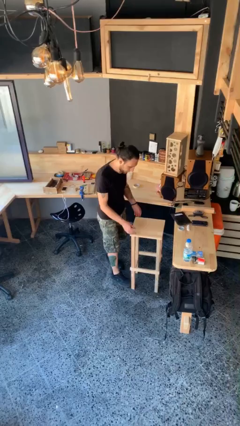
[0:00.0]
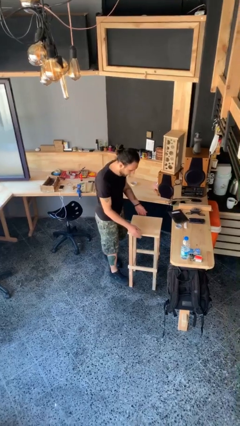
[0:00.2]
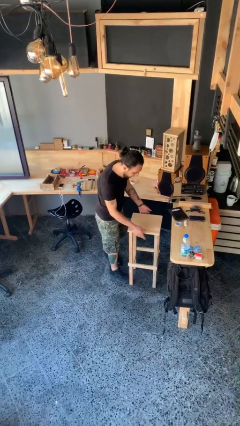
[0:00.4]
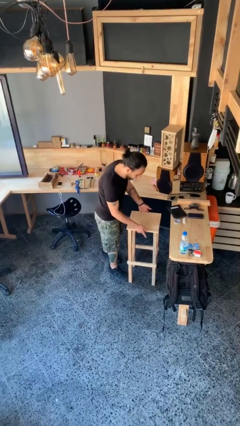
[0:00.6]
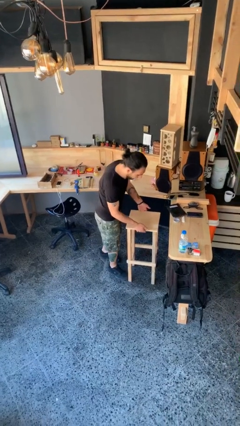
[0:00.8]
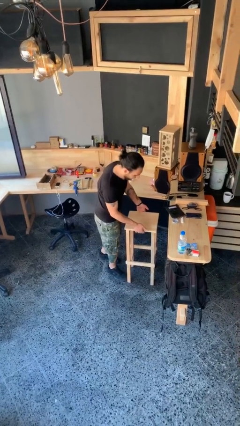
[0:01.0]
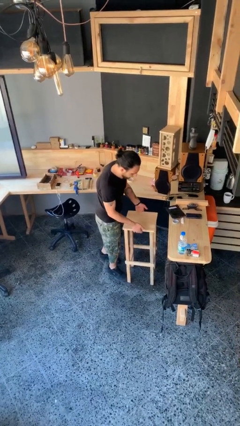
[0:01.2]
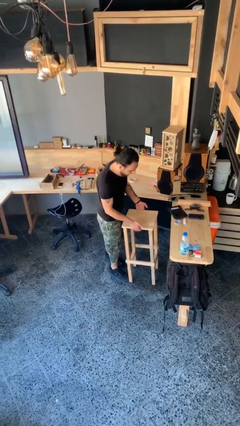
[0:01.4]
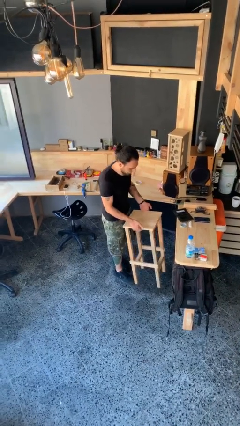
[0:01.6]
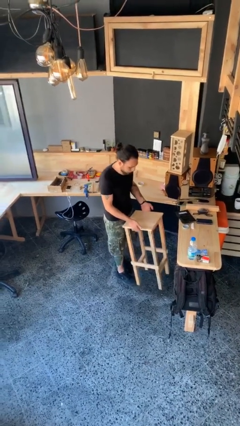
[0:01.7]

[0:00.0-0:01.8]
person picks up object from floor

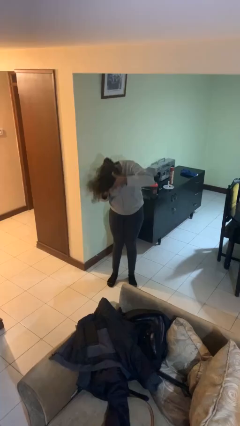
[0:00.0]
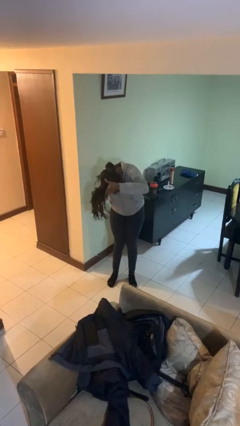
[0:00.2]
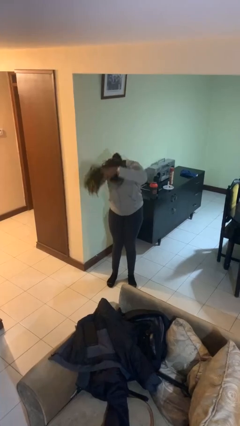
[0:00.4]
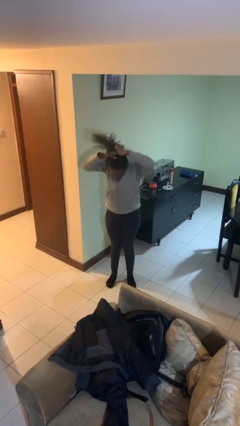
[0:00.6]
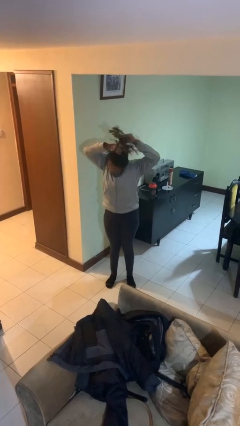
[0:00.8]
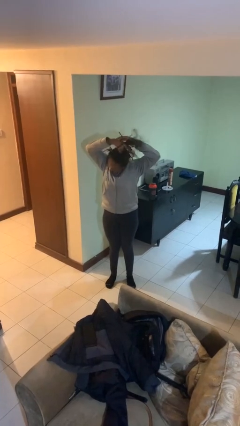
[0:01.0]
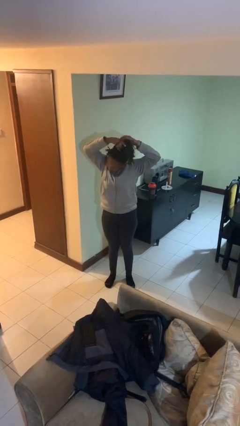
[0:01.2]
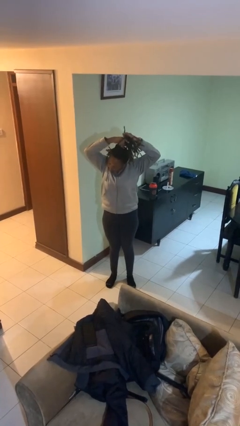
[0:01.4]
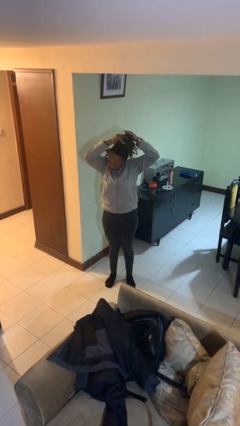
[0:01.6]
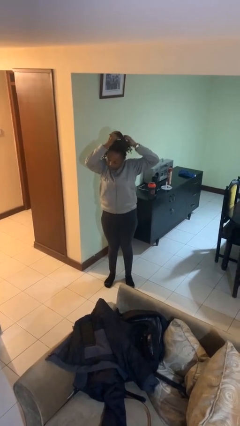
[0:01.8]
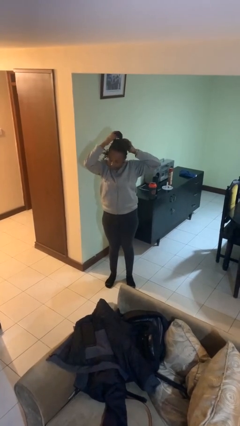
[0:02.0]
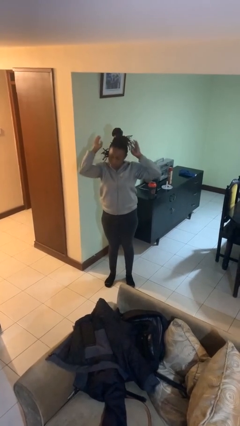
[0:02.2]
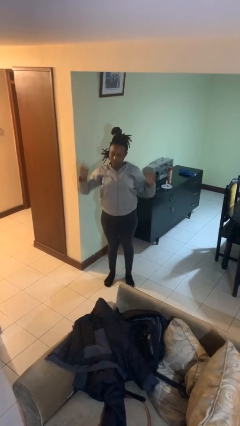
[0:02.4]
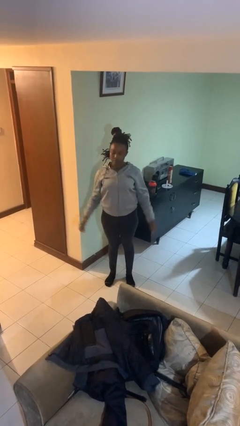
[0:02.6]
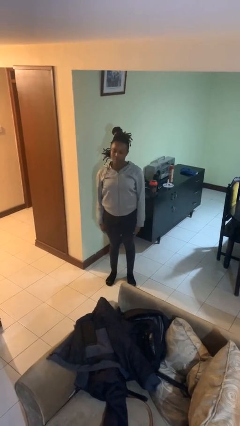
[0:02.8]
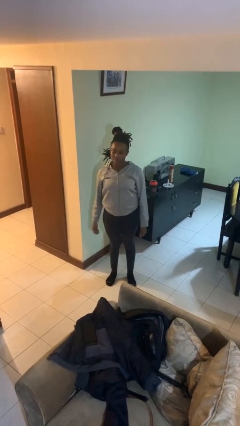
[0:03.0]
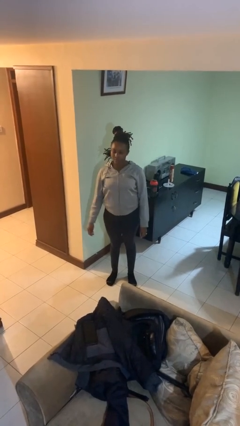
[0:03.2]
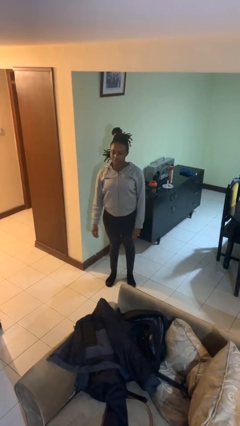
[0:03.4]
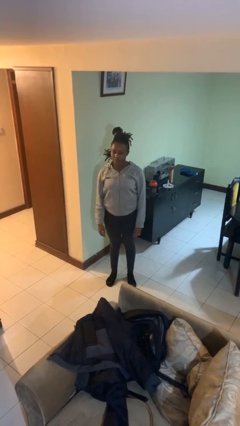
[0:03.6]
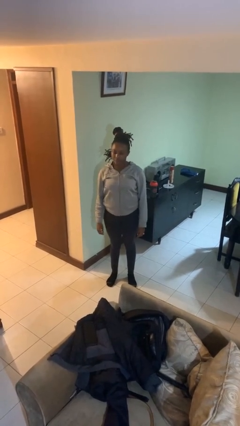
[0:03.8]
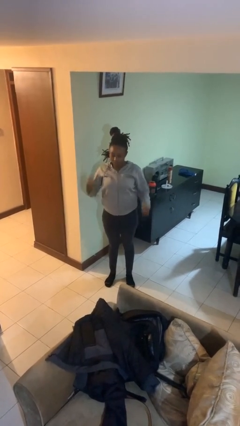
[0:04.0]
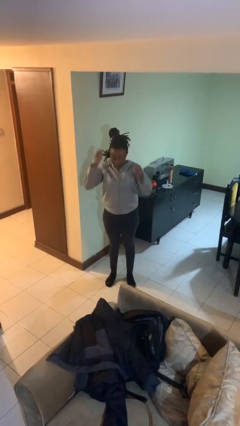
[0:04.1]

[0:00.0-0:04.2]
person puts hair in ponytail

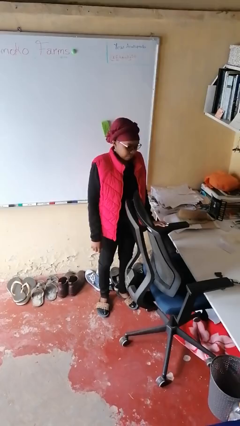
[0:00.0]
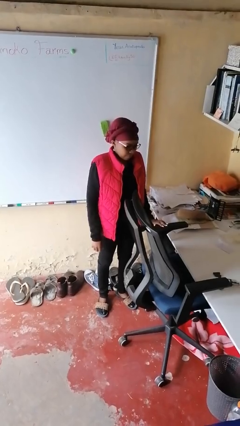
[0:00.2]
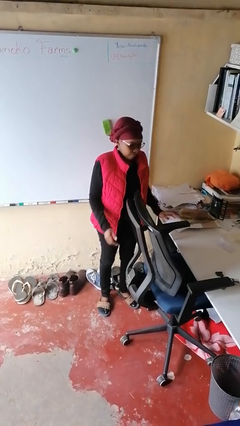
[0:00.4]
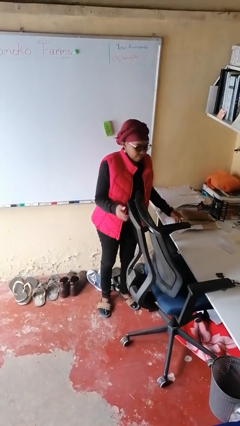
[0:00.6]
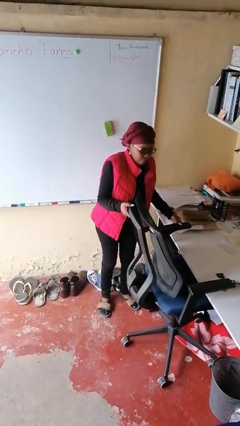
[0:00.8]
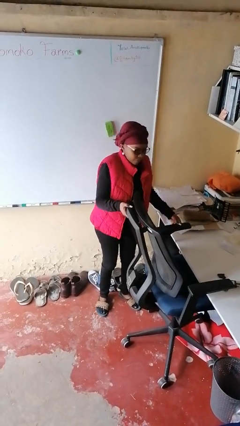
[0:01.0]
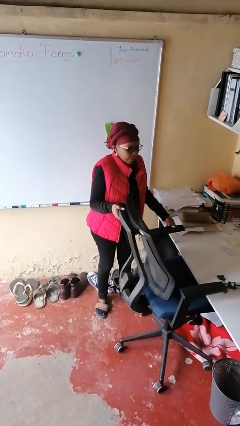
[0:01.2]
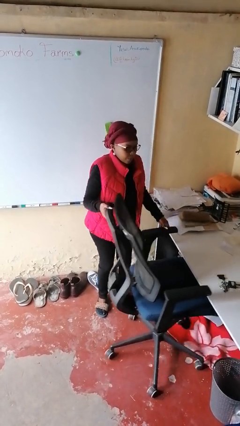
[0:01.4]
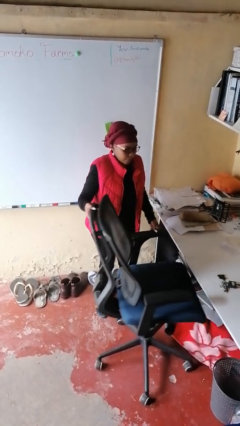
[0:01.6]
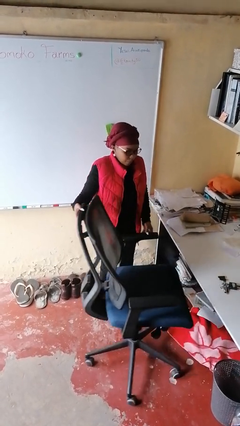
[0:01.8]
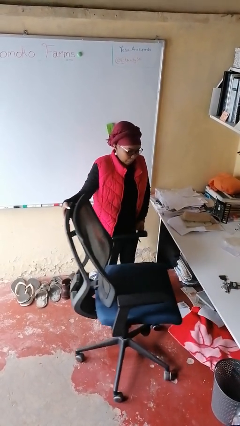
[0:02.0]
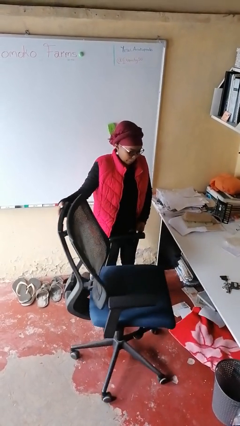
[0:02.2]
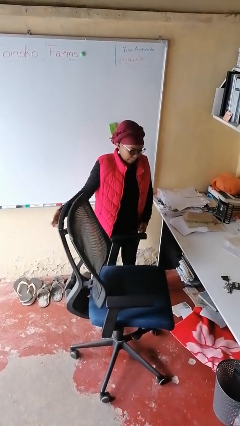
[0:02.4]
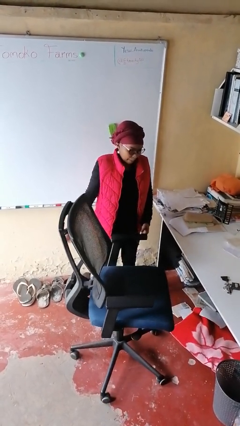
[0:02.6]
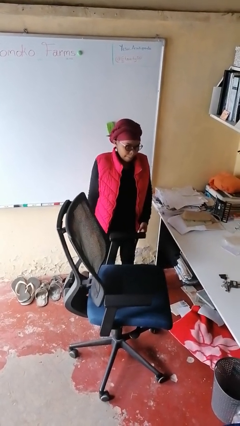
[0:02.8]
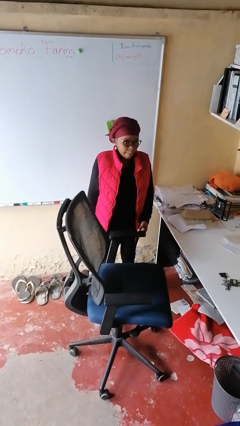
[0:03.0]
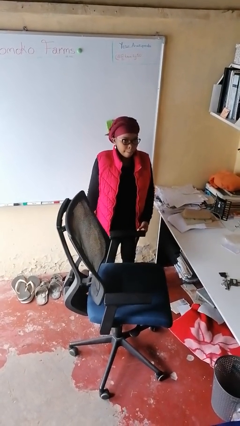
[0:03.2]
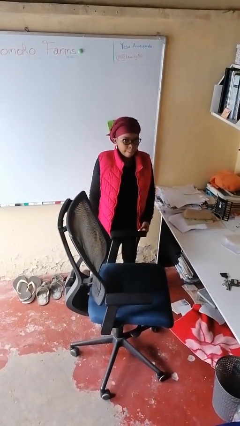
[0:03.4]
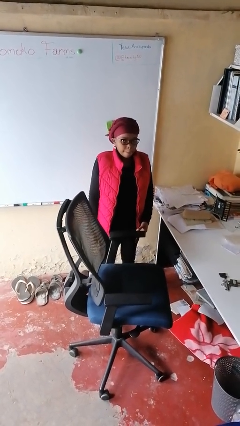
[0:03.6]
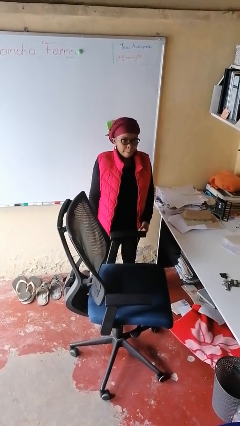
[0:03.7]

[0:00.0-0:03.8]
person pulls out chair

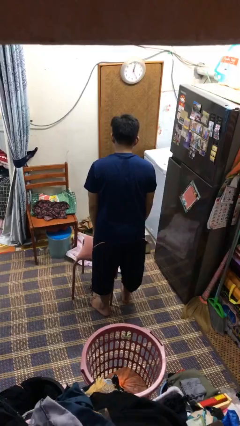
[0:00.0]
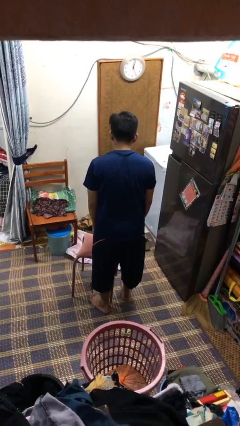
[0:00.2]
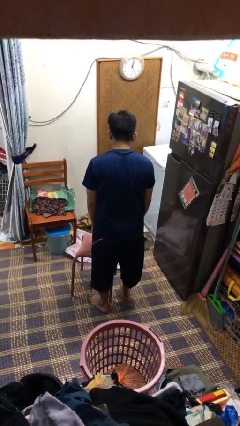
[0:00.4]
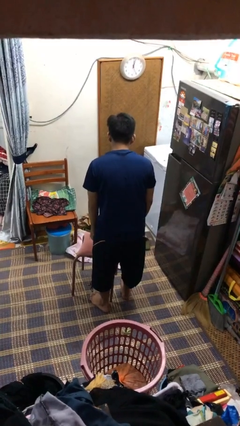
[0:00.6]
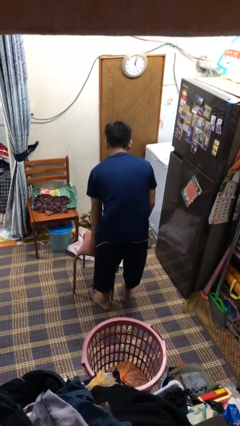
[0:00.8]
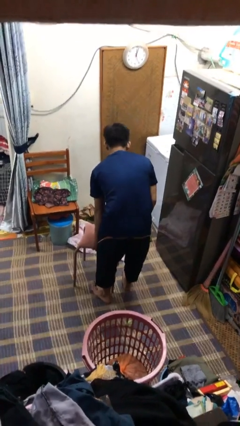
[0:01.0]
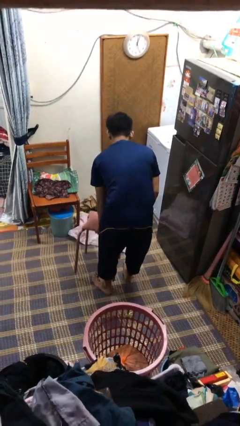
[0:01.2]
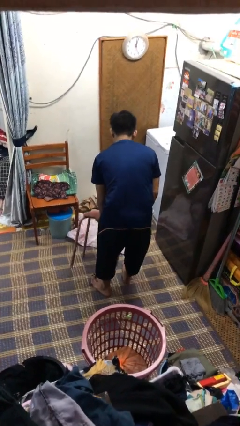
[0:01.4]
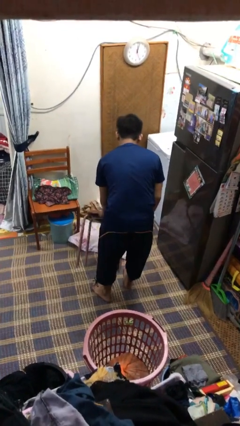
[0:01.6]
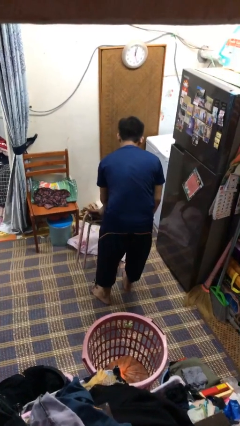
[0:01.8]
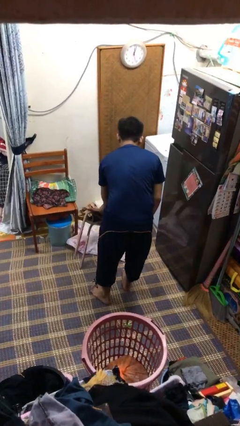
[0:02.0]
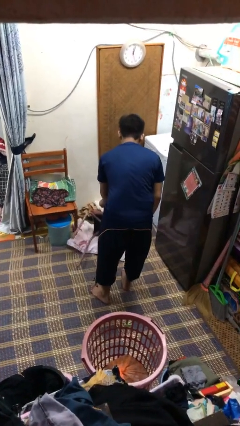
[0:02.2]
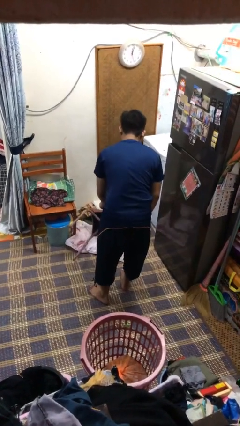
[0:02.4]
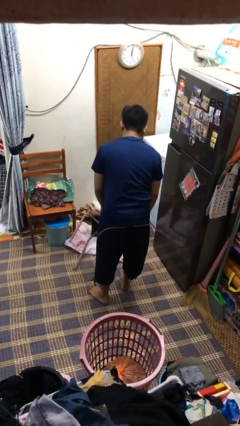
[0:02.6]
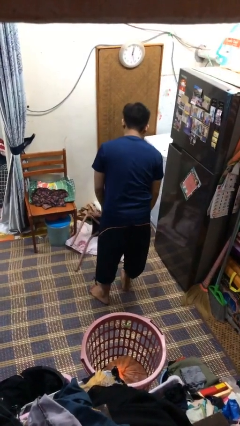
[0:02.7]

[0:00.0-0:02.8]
person knocks over furniture

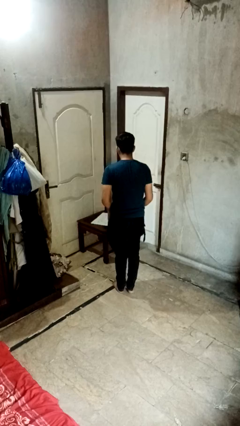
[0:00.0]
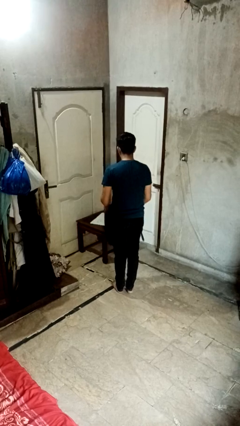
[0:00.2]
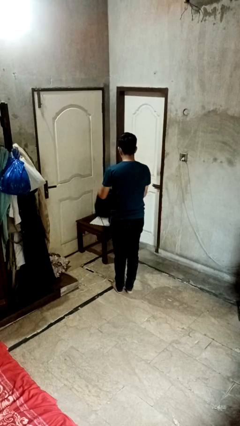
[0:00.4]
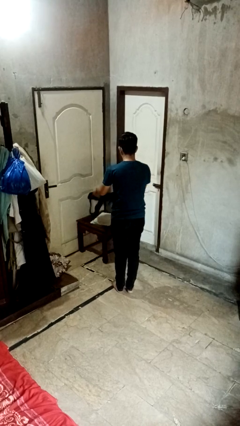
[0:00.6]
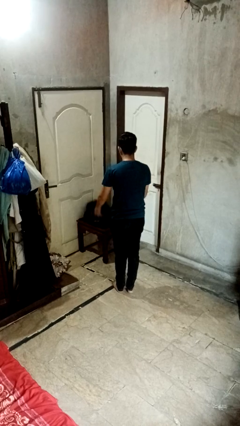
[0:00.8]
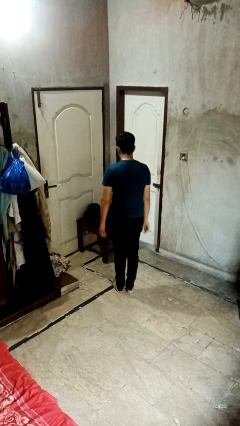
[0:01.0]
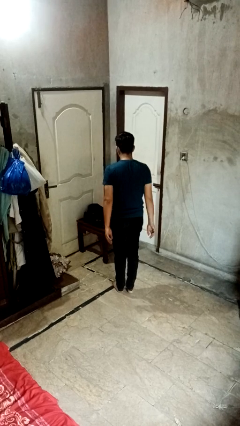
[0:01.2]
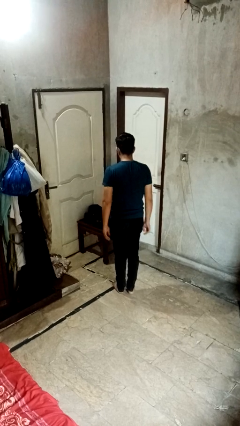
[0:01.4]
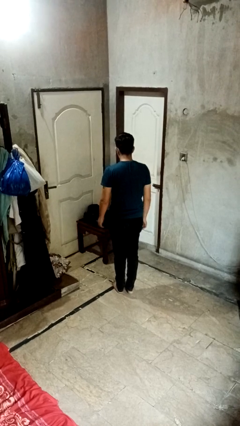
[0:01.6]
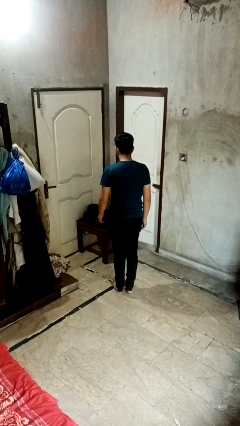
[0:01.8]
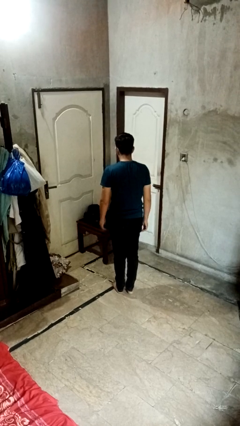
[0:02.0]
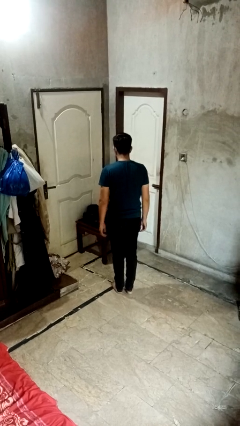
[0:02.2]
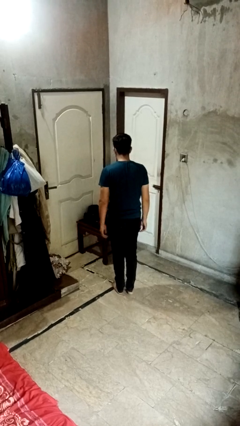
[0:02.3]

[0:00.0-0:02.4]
person throws object on table

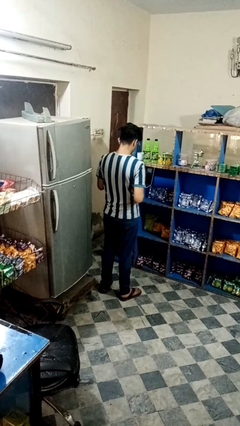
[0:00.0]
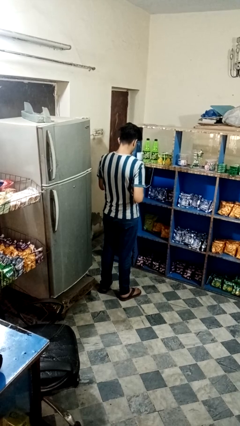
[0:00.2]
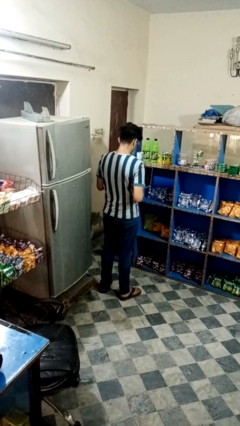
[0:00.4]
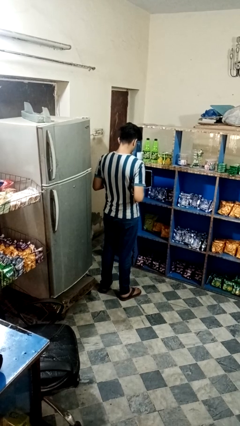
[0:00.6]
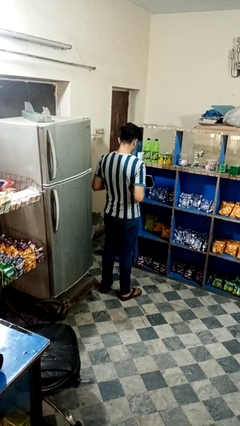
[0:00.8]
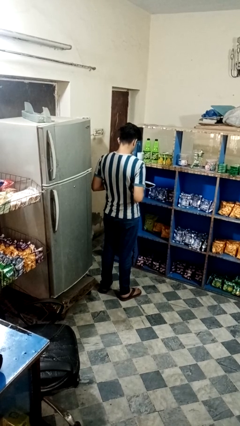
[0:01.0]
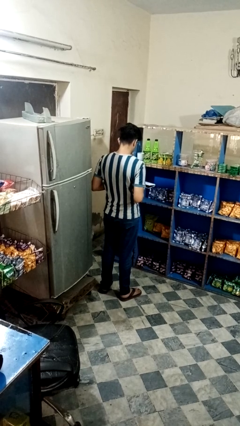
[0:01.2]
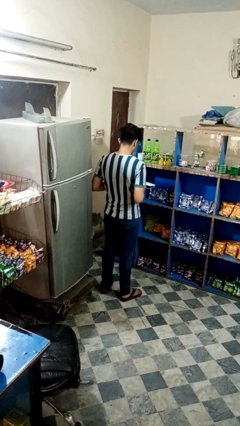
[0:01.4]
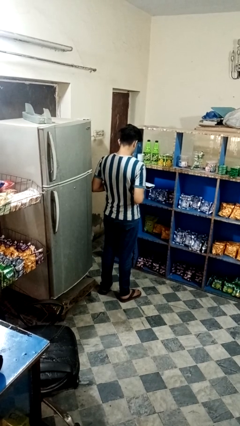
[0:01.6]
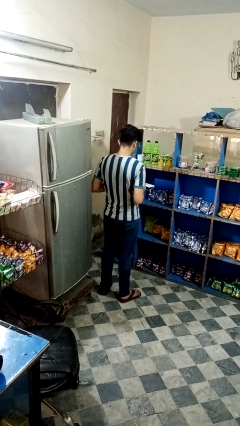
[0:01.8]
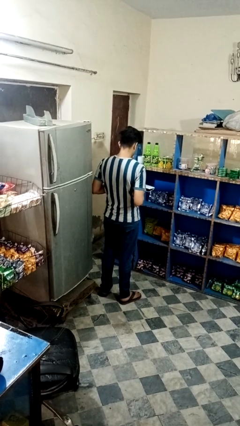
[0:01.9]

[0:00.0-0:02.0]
person closes laptop

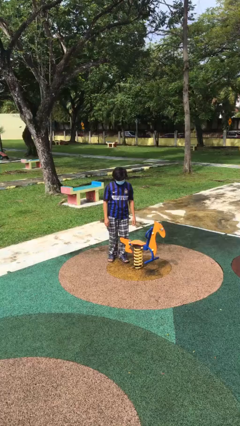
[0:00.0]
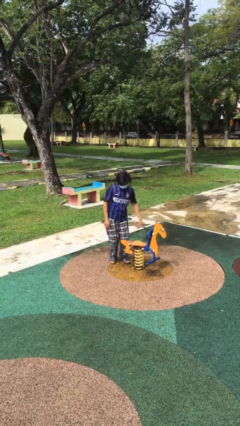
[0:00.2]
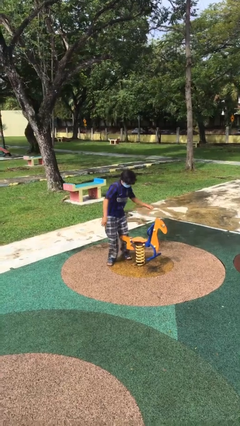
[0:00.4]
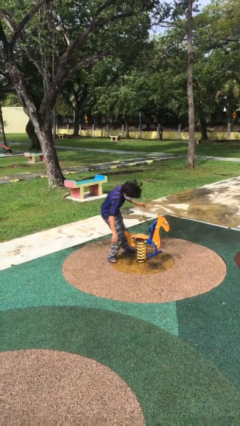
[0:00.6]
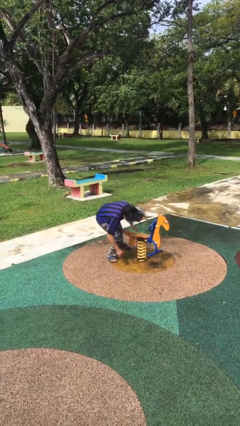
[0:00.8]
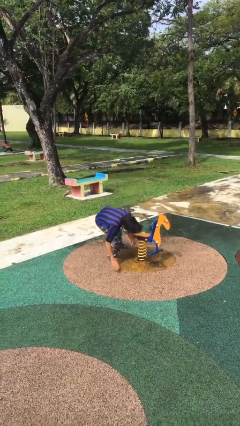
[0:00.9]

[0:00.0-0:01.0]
person trips on object on floor
